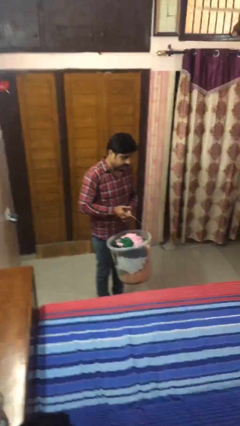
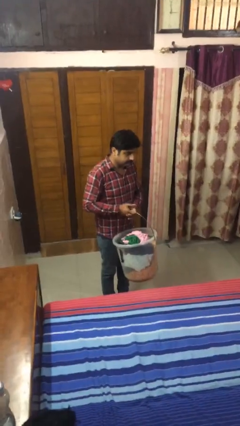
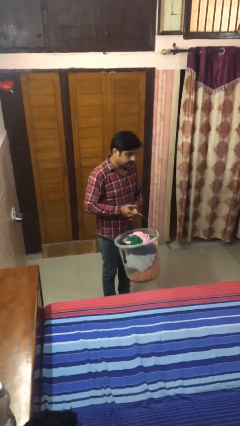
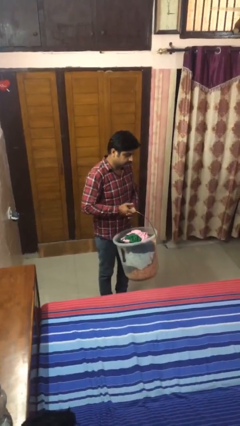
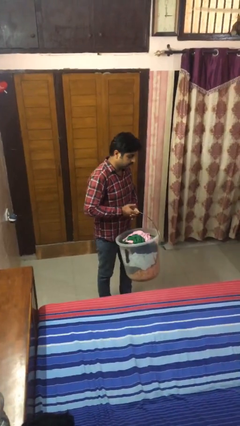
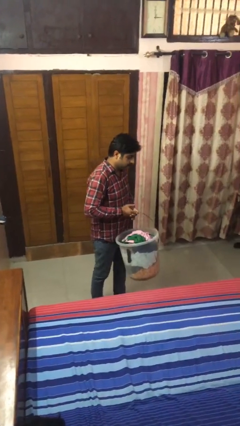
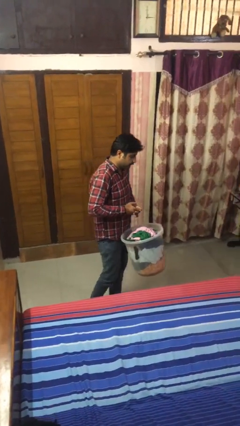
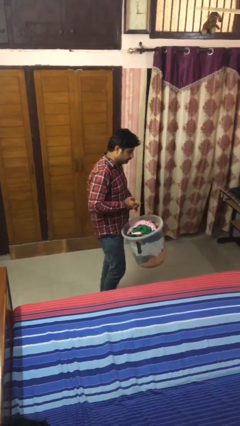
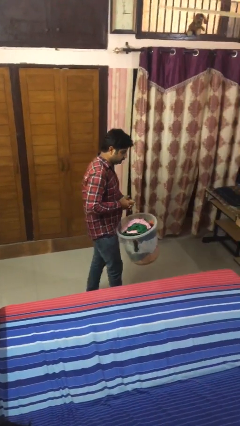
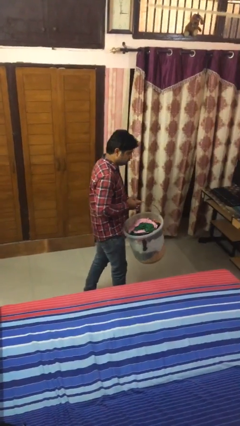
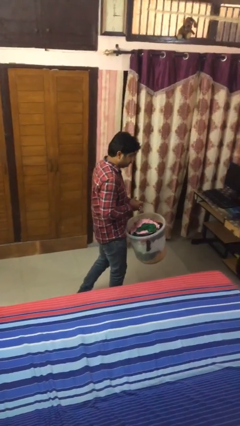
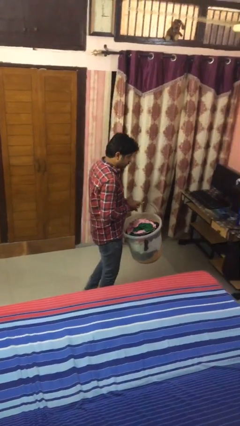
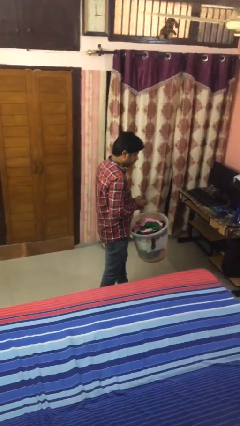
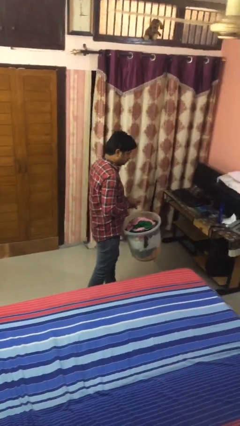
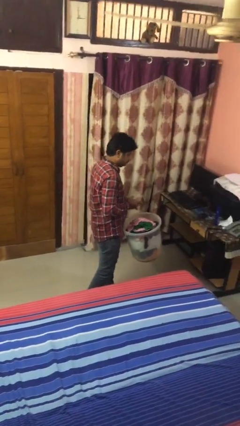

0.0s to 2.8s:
person carries laundry basket

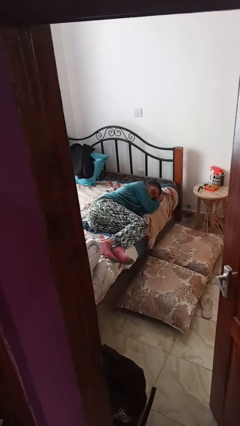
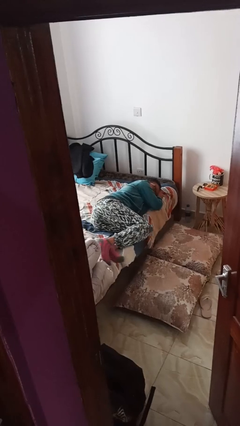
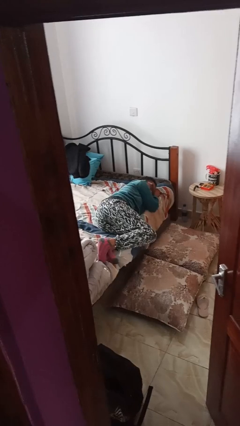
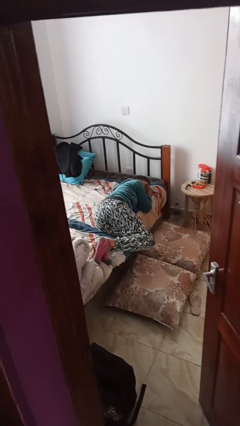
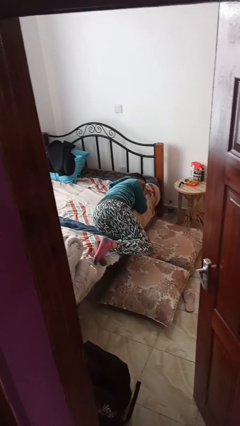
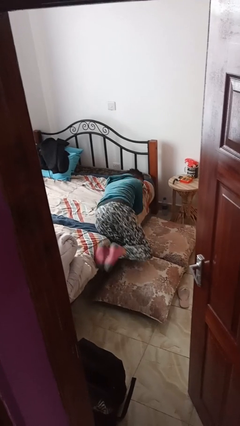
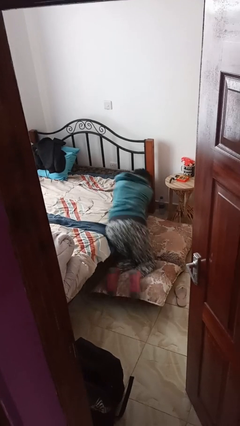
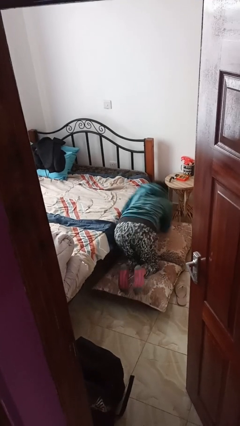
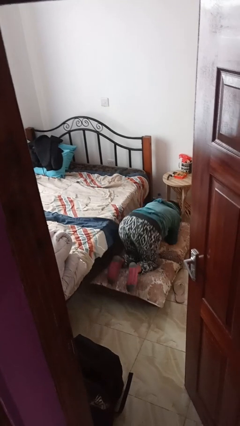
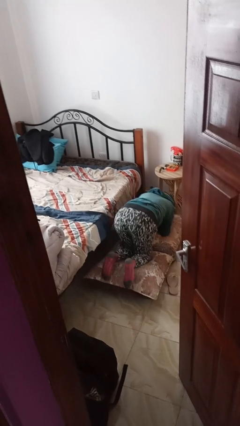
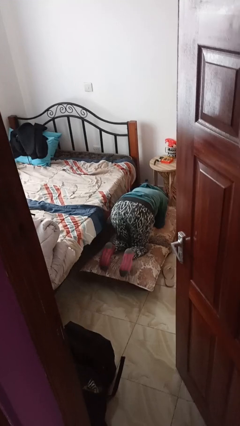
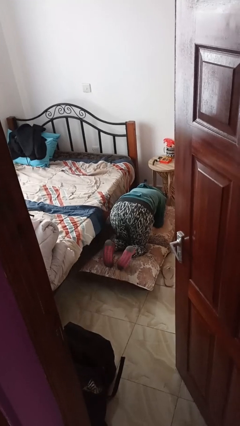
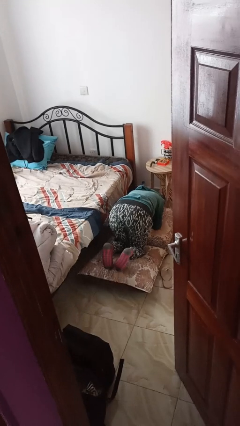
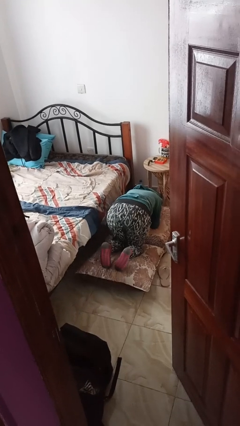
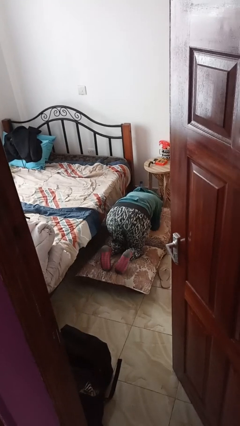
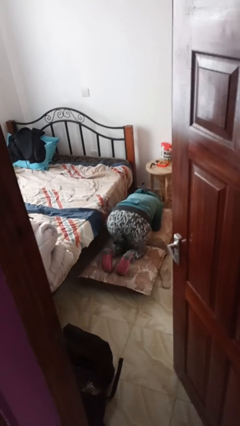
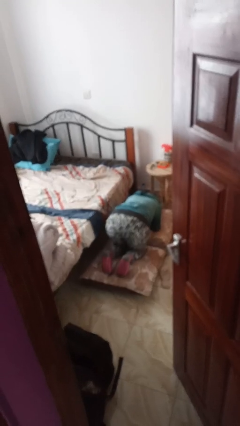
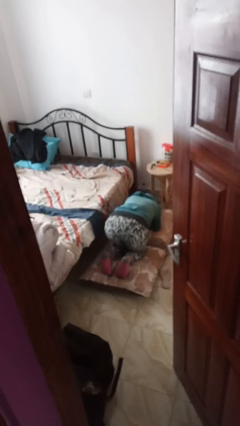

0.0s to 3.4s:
person falls from bed

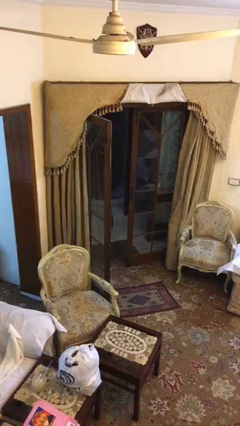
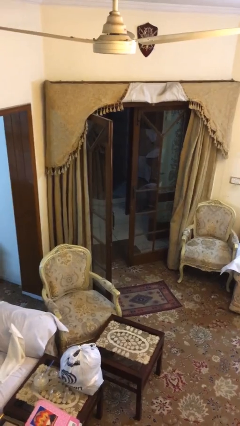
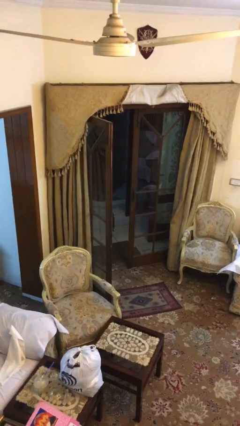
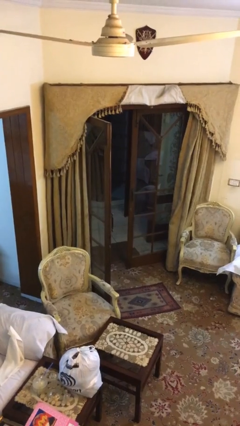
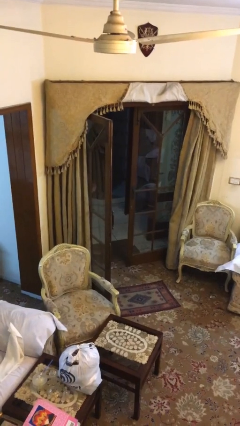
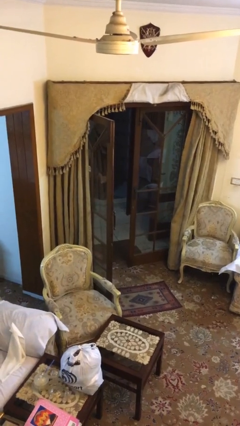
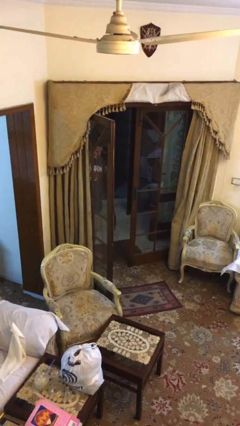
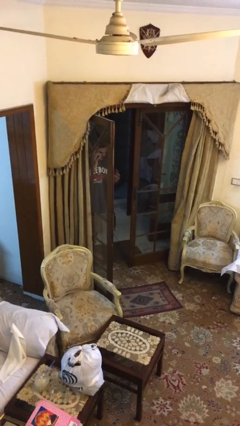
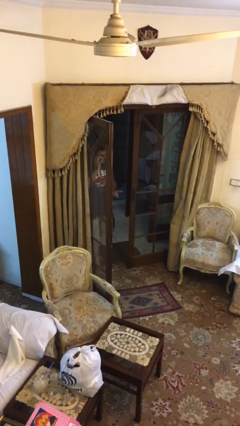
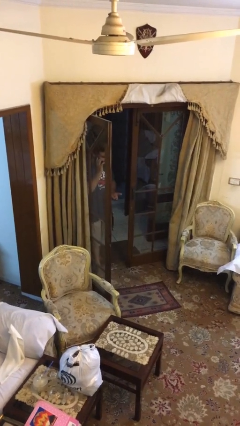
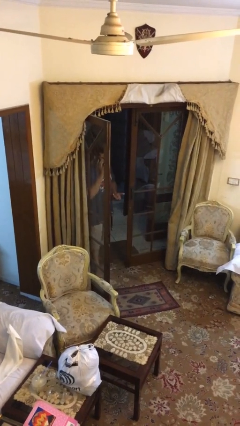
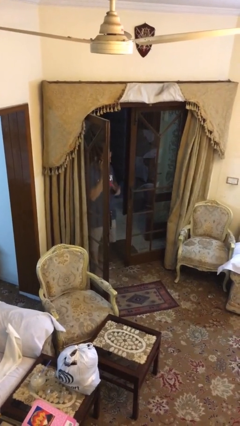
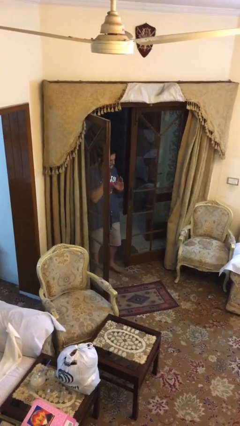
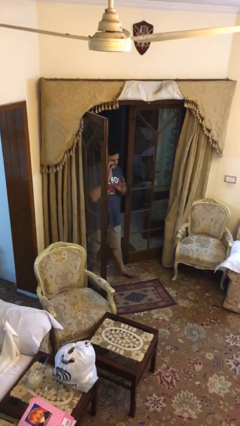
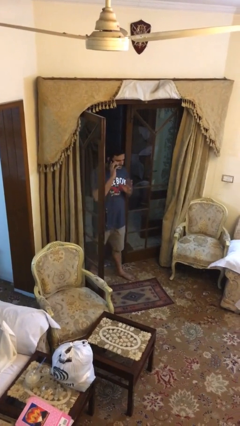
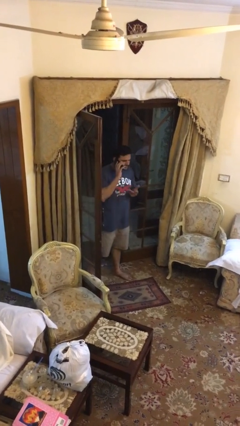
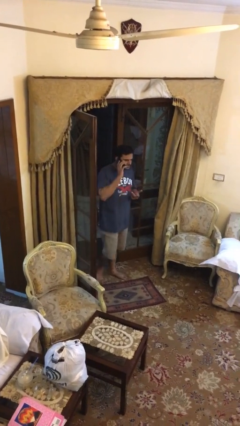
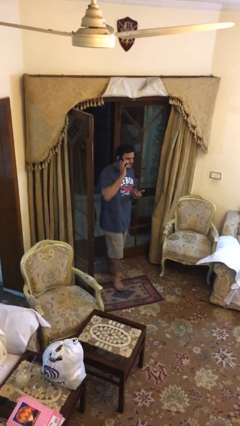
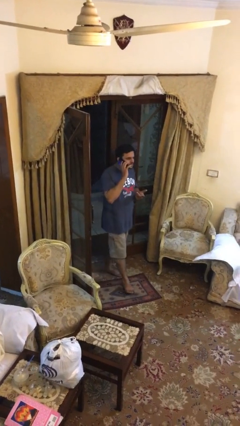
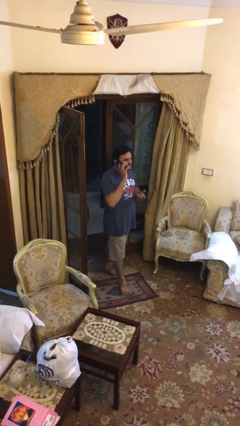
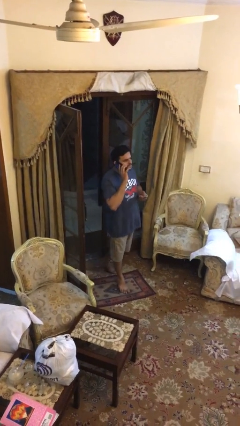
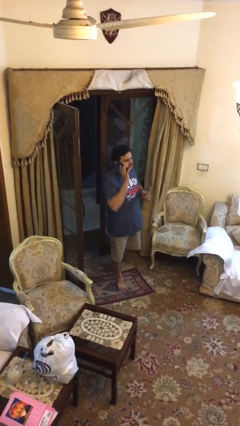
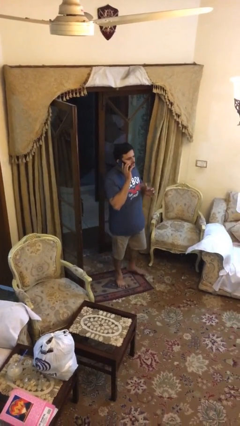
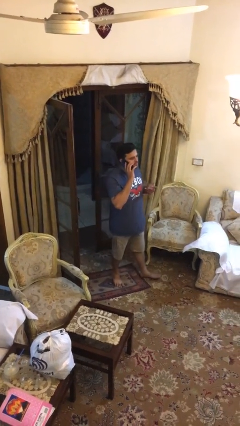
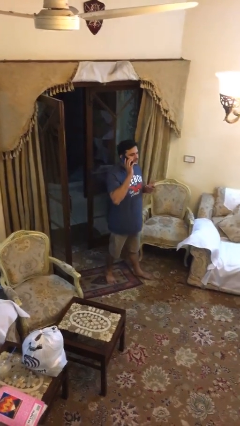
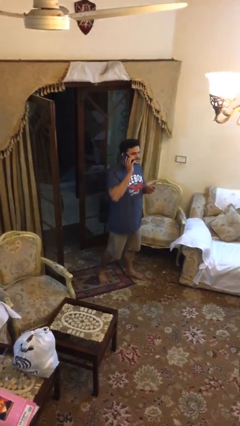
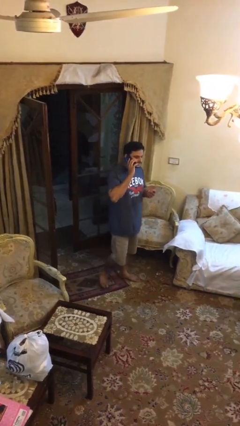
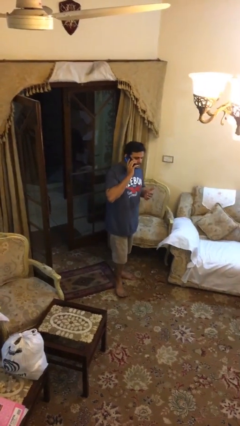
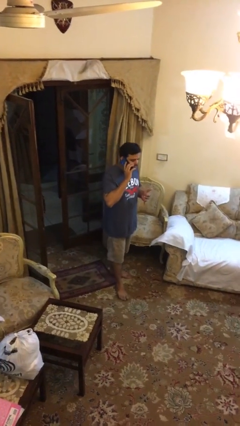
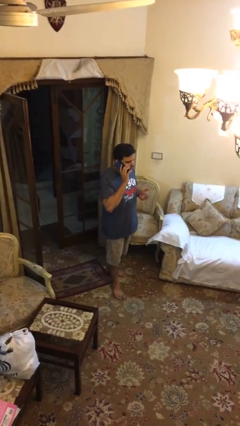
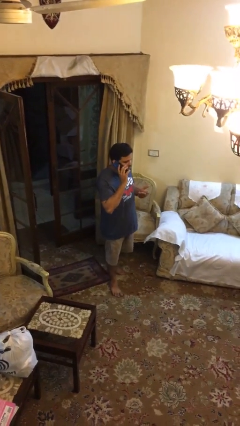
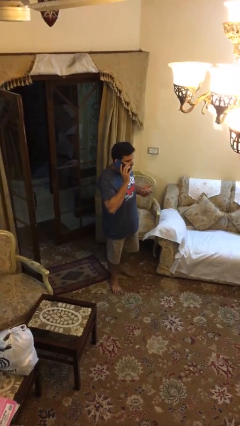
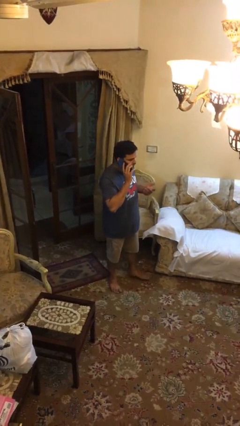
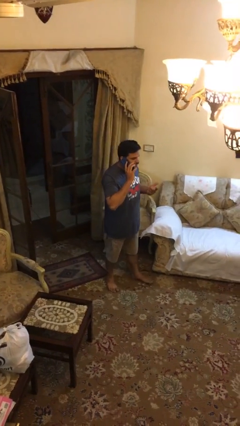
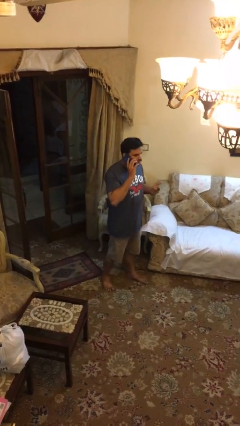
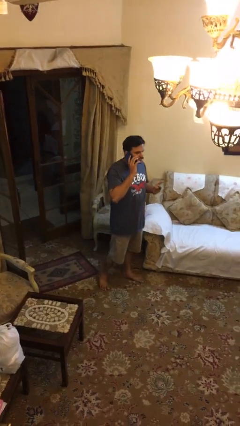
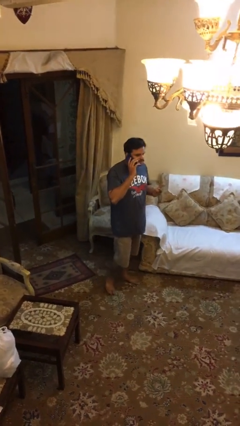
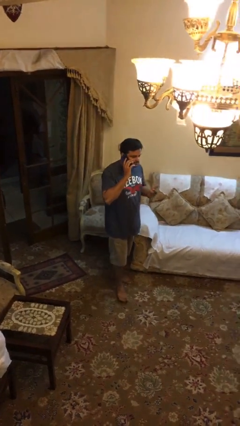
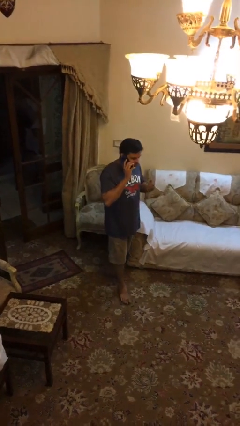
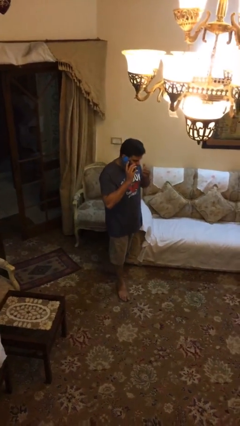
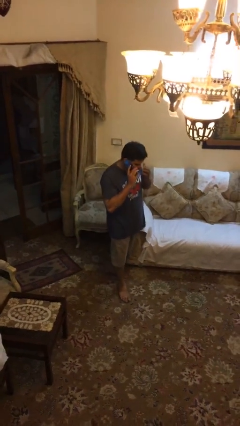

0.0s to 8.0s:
person enters scene through structure

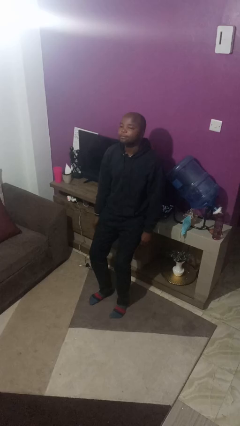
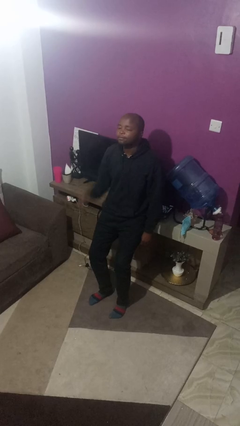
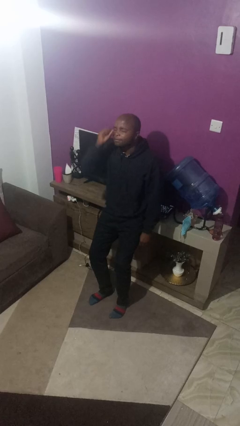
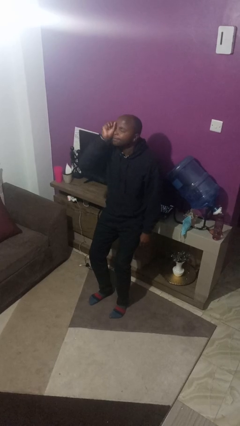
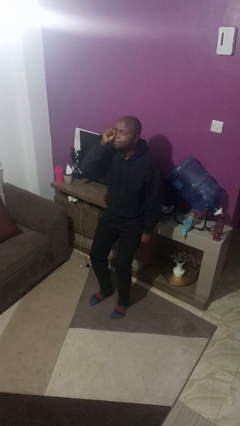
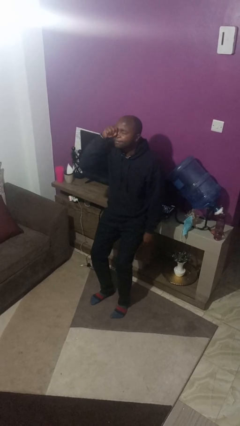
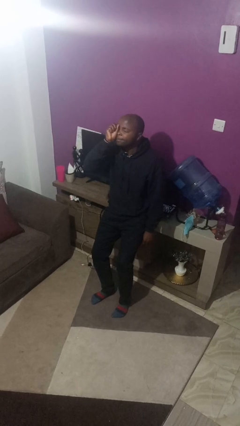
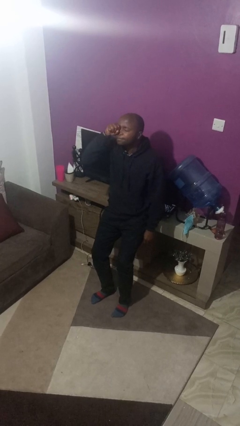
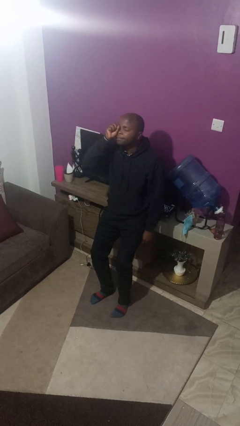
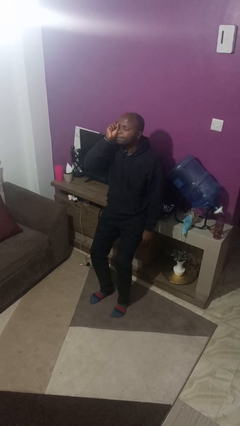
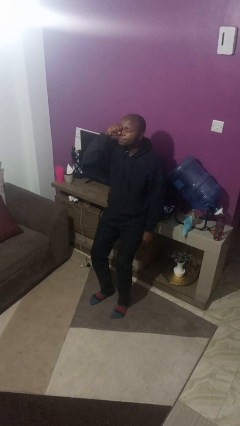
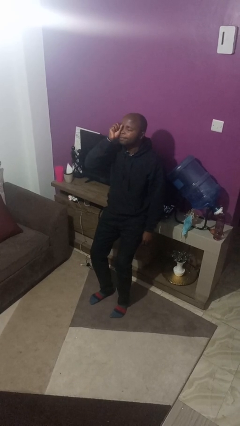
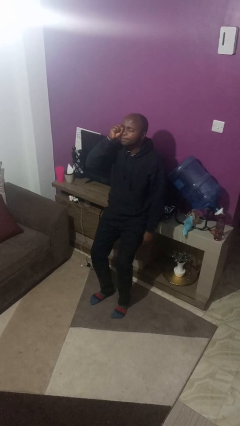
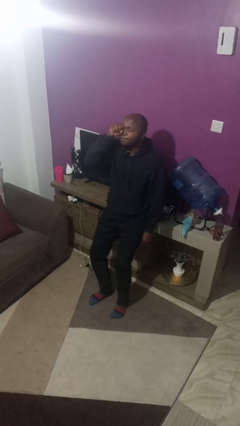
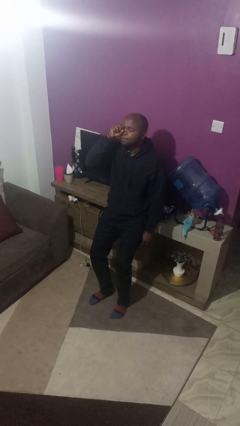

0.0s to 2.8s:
person rubs eyes

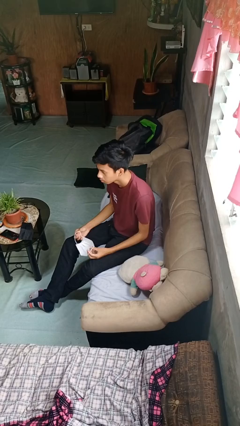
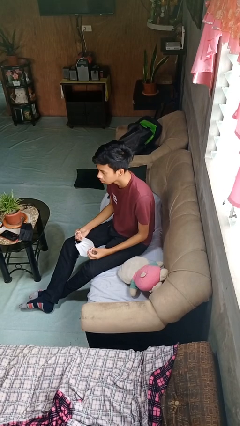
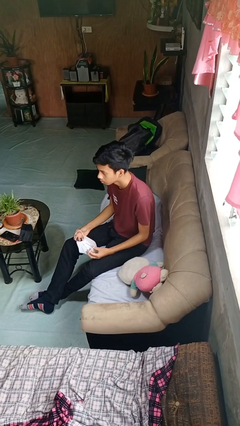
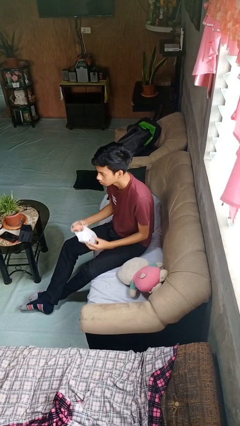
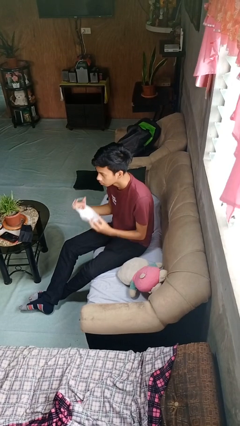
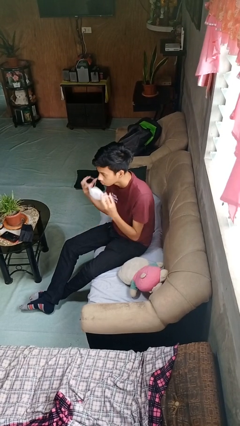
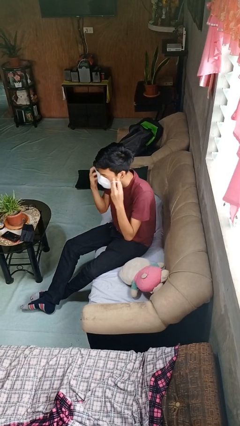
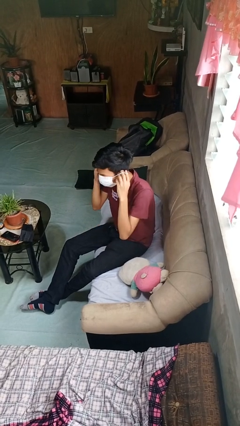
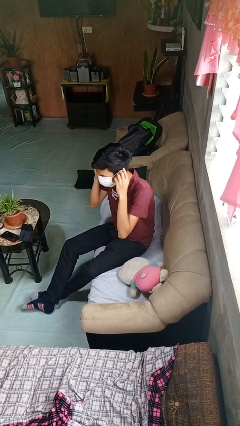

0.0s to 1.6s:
person puts on facemask
